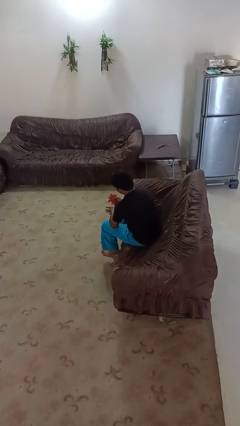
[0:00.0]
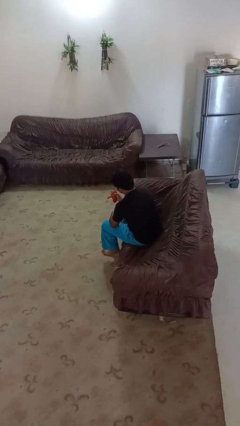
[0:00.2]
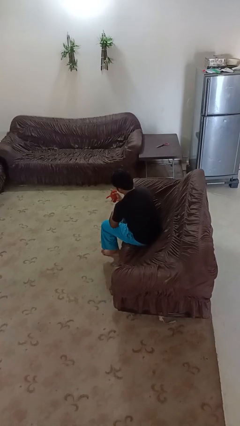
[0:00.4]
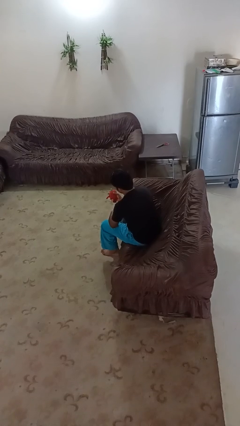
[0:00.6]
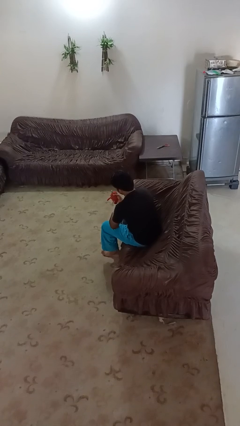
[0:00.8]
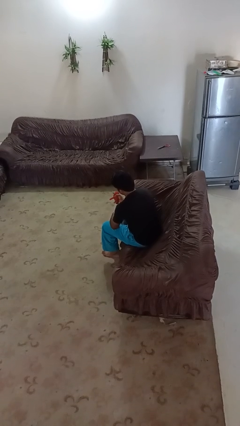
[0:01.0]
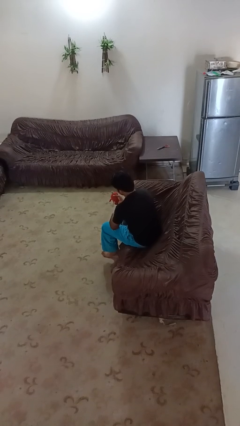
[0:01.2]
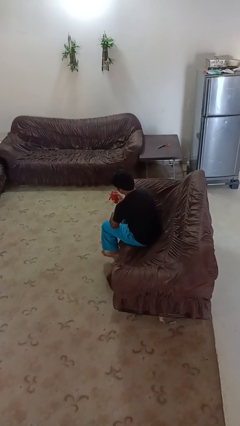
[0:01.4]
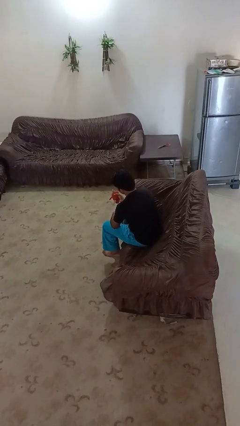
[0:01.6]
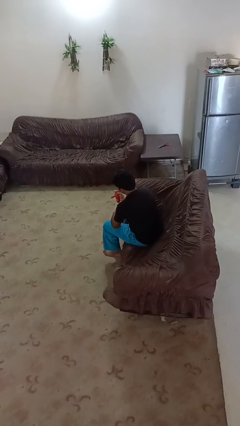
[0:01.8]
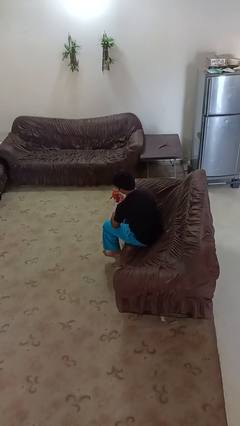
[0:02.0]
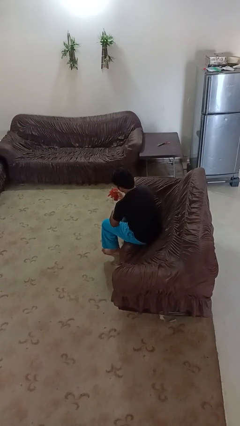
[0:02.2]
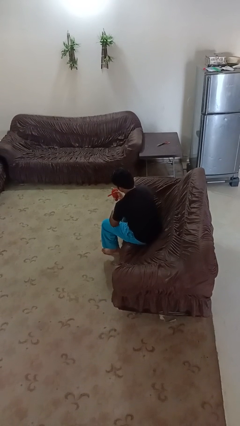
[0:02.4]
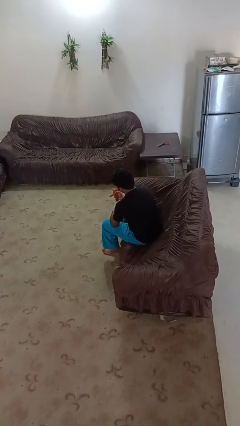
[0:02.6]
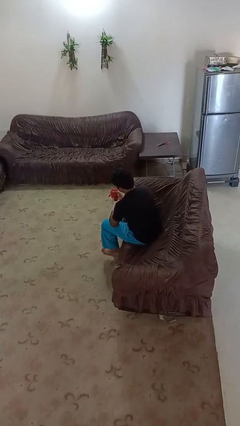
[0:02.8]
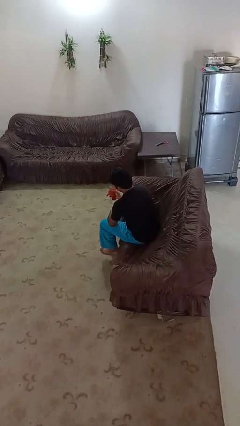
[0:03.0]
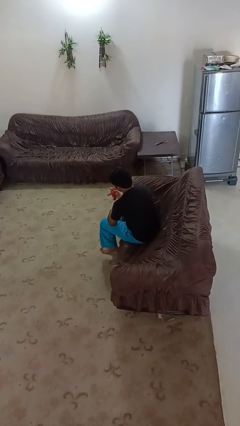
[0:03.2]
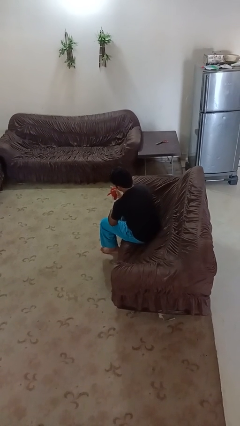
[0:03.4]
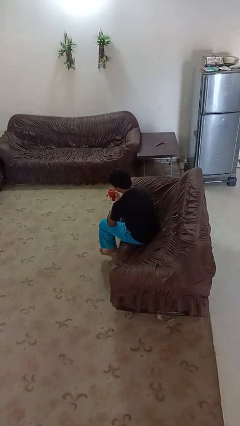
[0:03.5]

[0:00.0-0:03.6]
person squeezes object

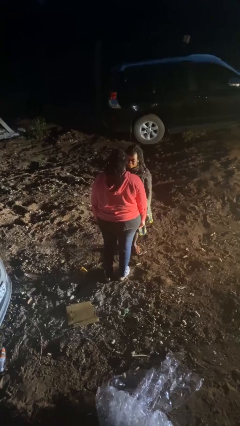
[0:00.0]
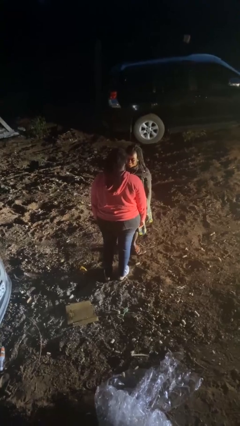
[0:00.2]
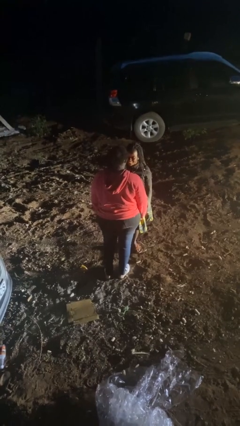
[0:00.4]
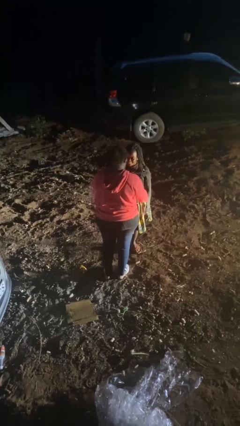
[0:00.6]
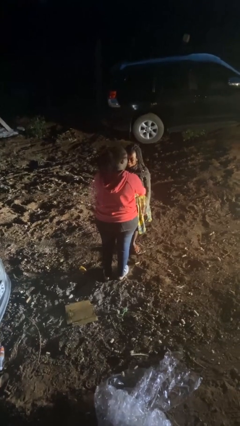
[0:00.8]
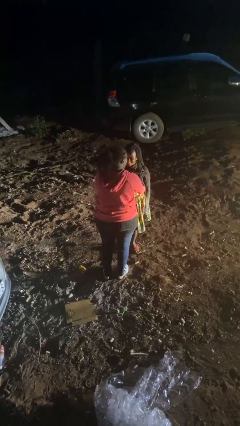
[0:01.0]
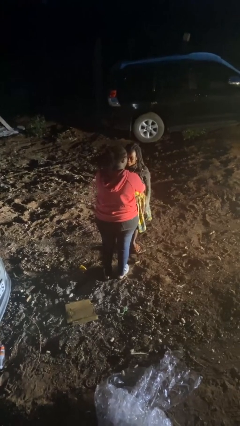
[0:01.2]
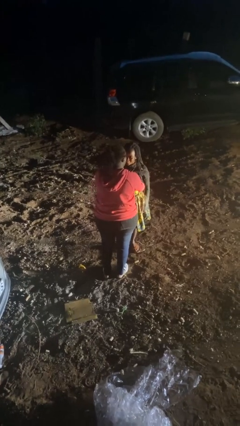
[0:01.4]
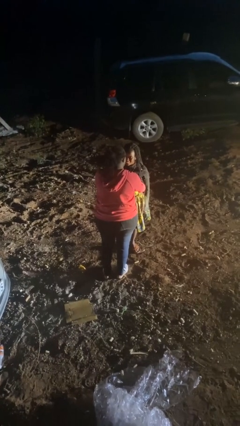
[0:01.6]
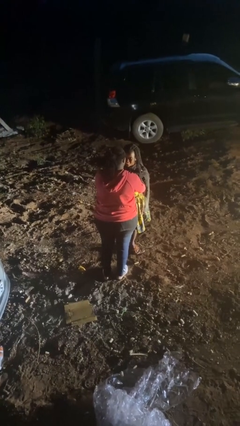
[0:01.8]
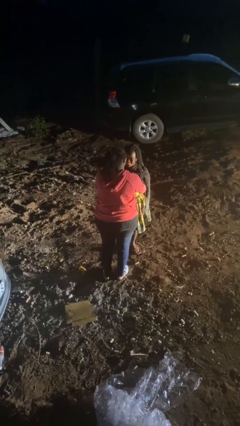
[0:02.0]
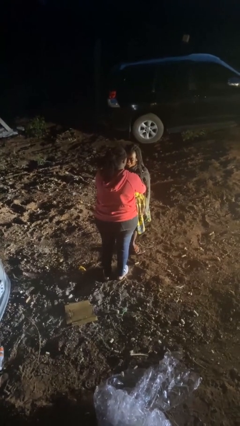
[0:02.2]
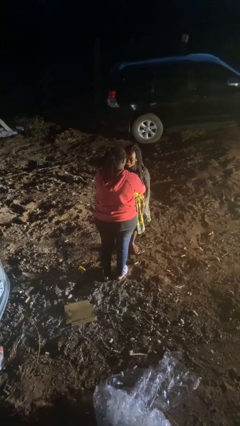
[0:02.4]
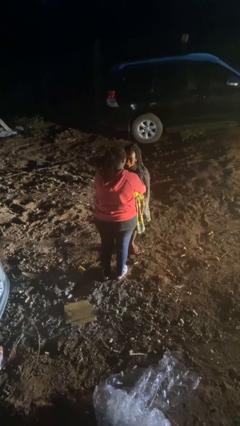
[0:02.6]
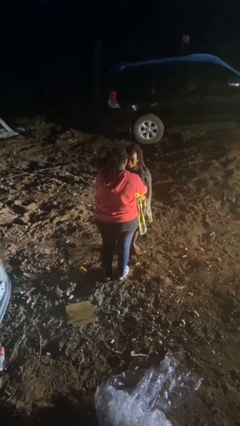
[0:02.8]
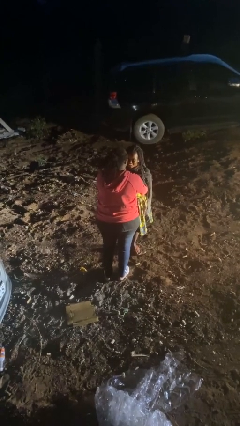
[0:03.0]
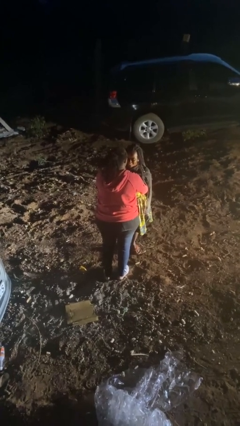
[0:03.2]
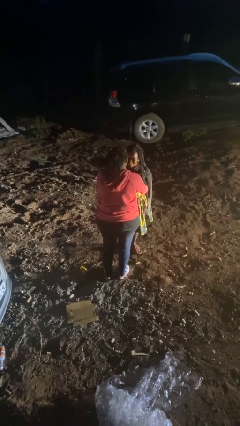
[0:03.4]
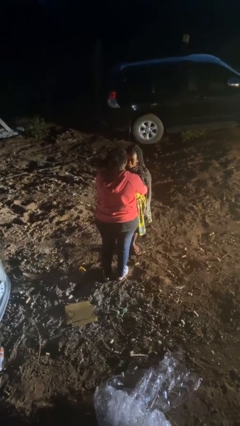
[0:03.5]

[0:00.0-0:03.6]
person tickles person

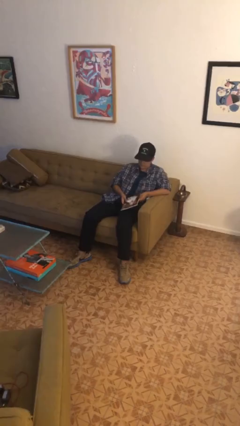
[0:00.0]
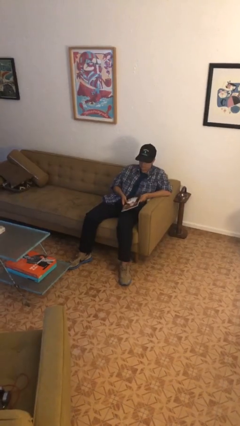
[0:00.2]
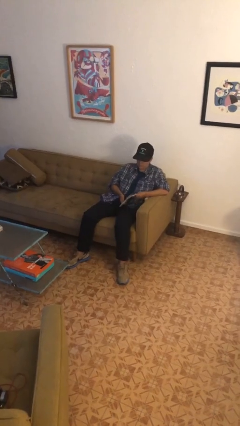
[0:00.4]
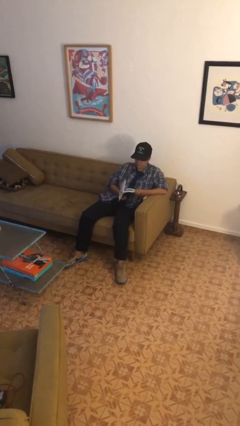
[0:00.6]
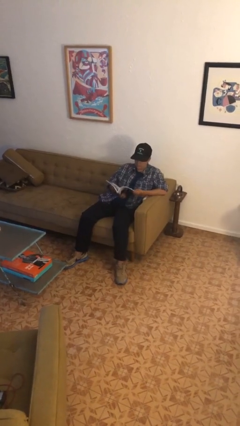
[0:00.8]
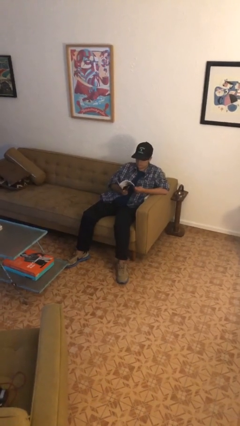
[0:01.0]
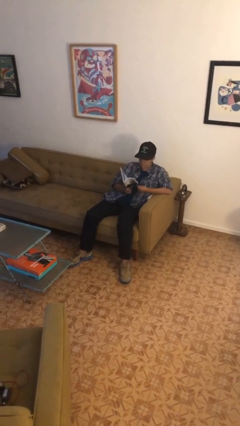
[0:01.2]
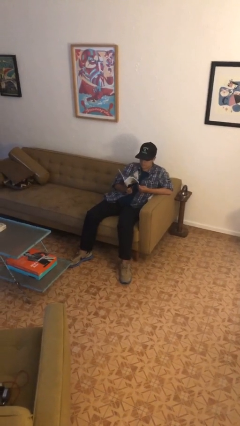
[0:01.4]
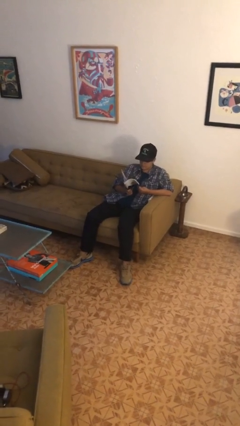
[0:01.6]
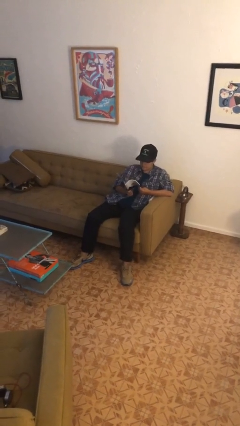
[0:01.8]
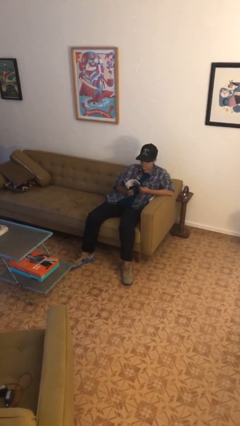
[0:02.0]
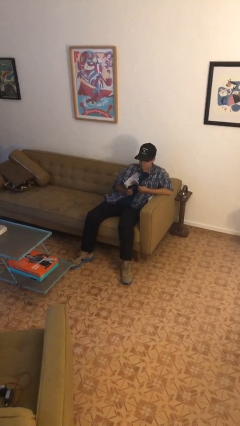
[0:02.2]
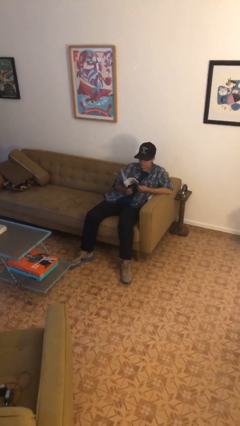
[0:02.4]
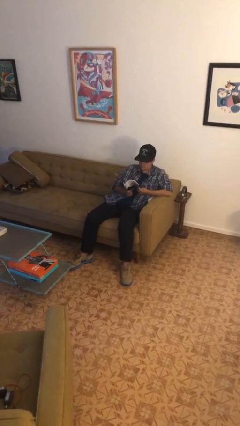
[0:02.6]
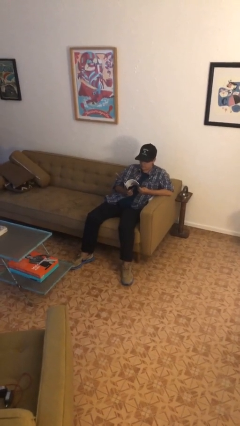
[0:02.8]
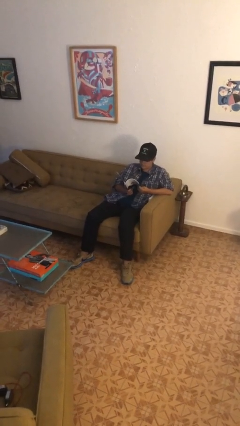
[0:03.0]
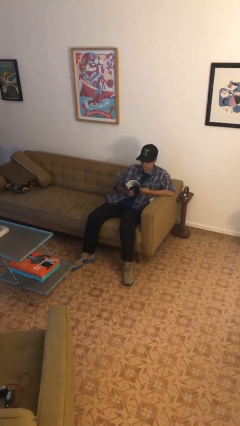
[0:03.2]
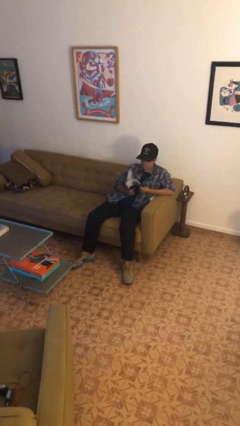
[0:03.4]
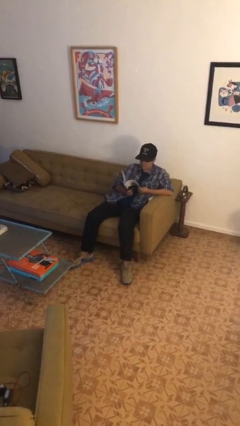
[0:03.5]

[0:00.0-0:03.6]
person reads magazine

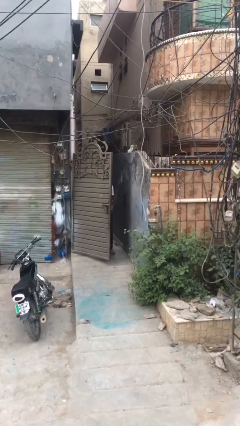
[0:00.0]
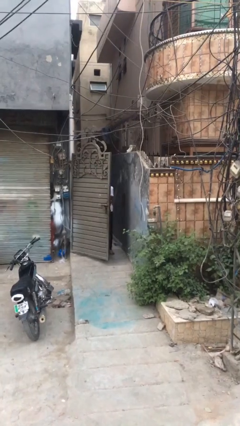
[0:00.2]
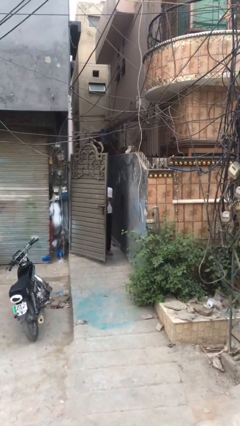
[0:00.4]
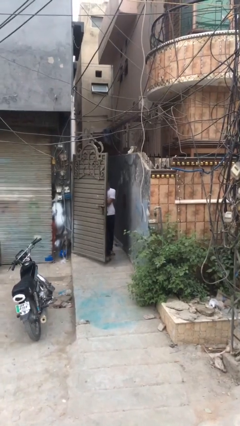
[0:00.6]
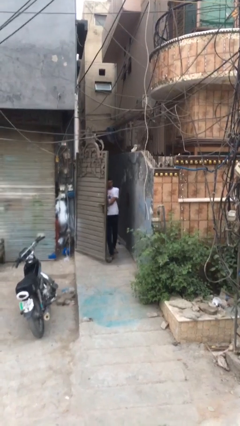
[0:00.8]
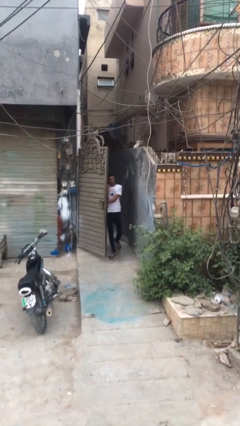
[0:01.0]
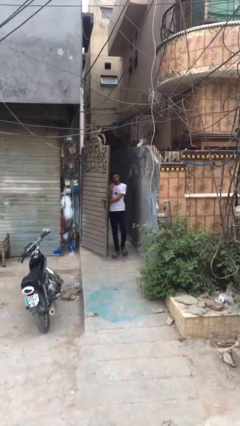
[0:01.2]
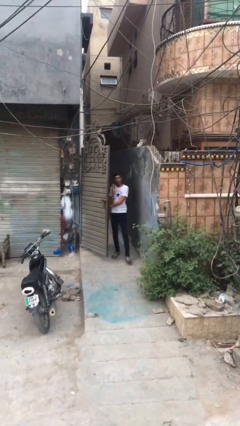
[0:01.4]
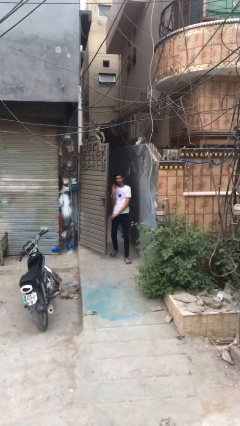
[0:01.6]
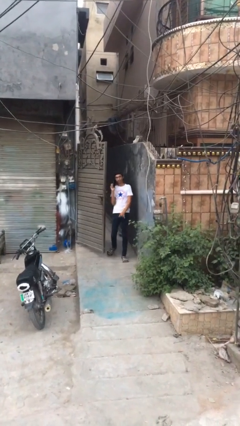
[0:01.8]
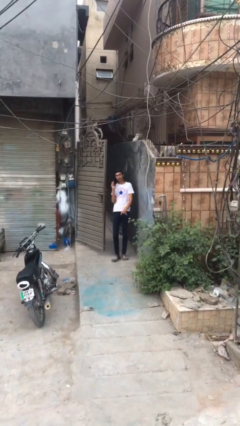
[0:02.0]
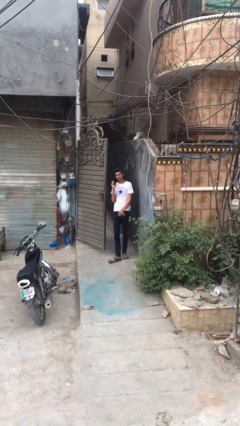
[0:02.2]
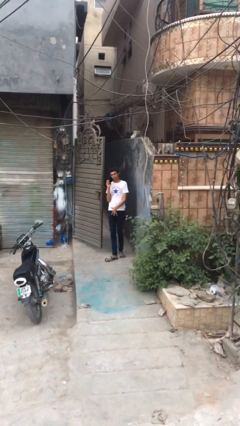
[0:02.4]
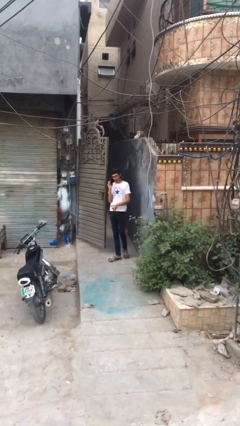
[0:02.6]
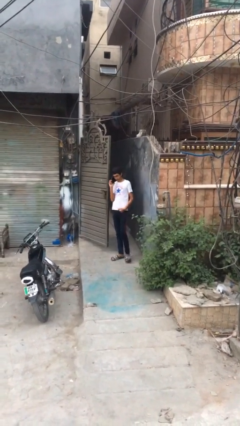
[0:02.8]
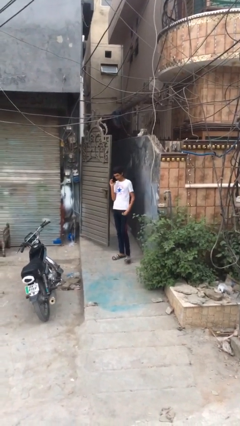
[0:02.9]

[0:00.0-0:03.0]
person enters scene through structure

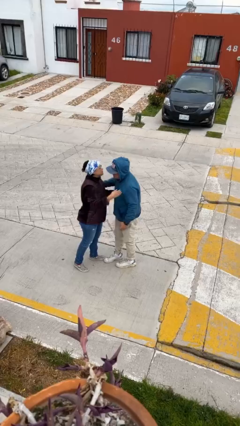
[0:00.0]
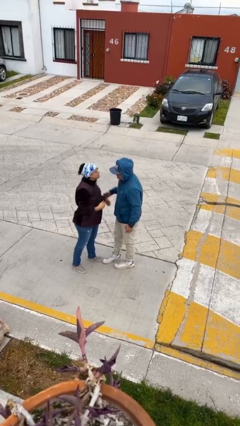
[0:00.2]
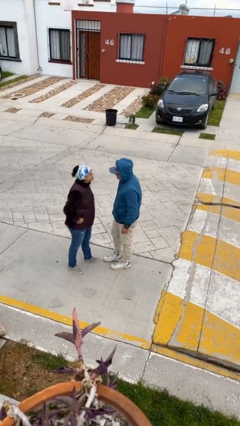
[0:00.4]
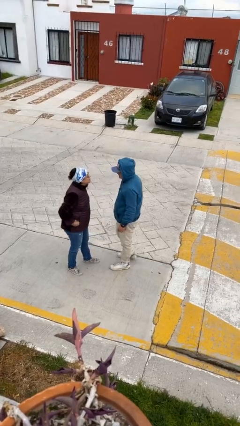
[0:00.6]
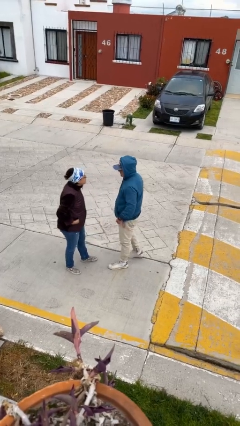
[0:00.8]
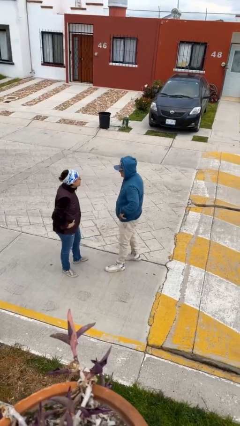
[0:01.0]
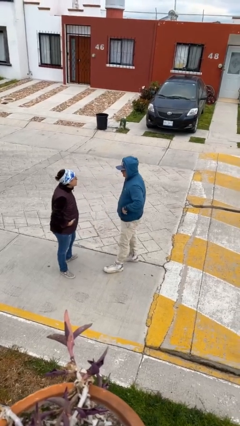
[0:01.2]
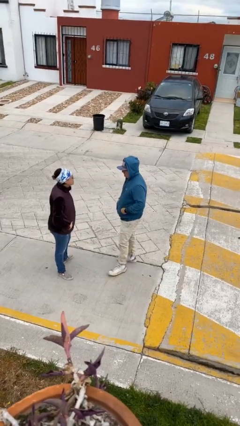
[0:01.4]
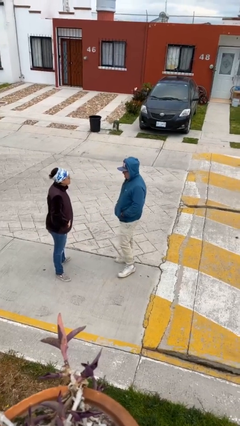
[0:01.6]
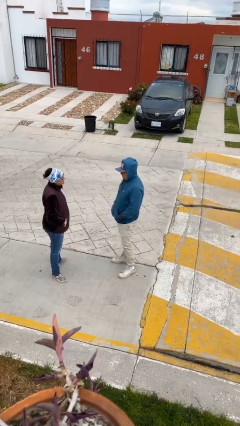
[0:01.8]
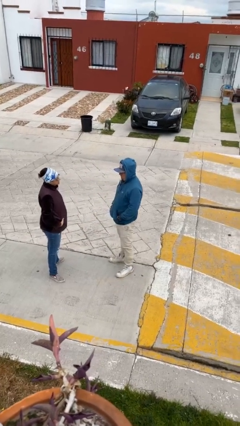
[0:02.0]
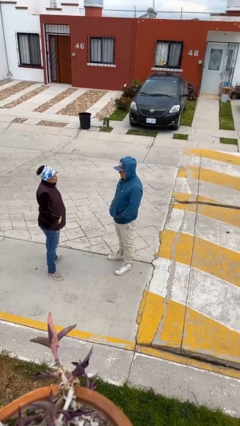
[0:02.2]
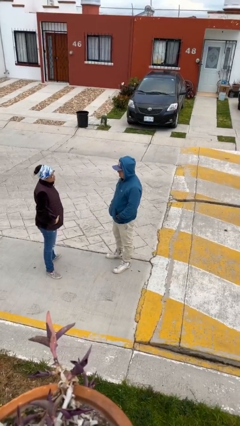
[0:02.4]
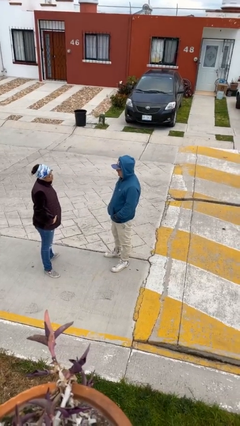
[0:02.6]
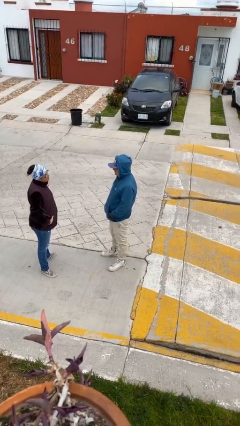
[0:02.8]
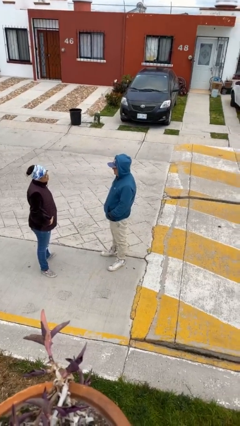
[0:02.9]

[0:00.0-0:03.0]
person talks to person

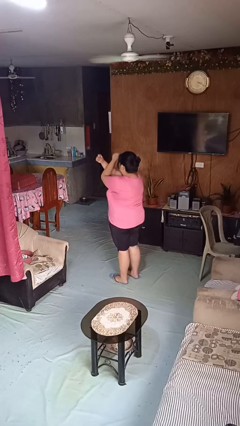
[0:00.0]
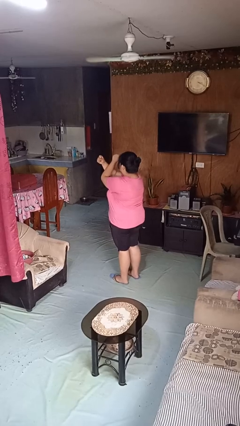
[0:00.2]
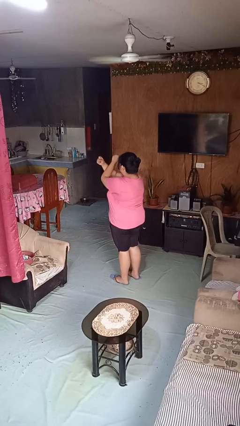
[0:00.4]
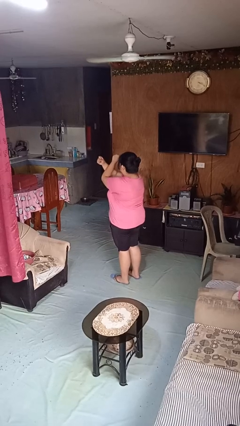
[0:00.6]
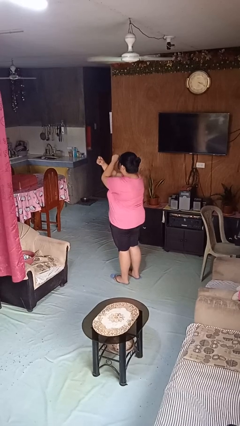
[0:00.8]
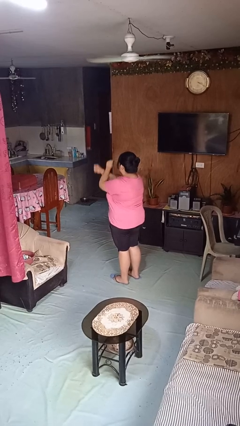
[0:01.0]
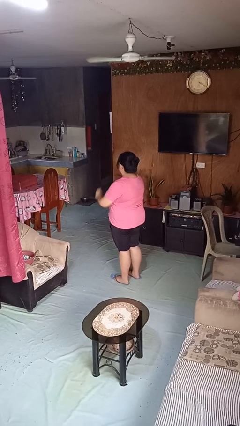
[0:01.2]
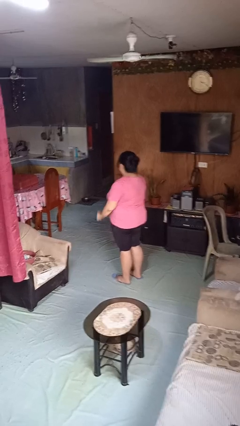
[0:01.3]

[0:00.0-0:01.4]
person gestures arms x
